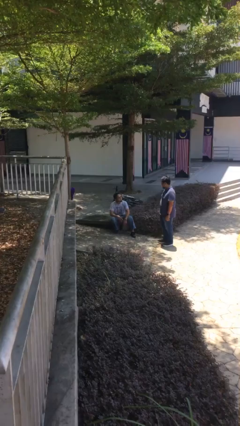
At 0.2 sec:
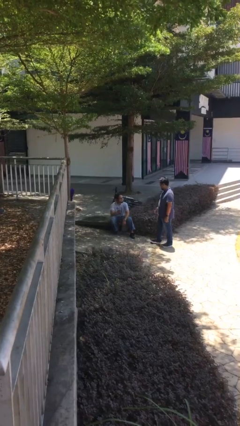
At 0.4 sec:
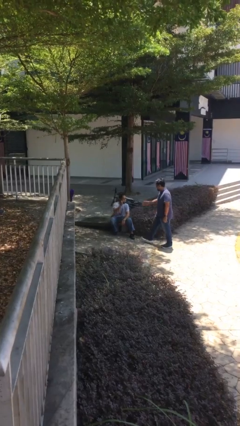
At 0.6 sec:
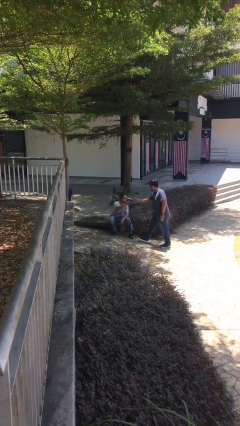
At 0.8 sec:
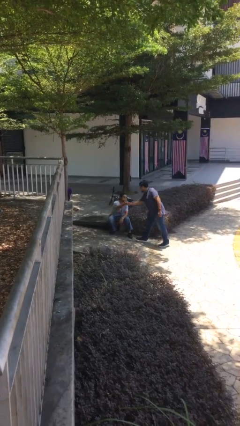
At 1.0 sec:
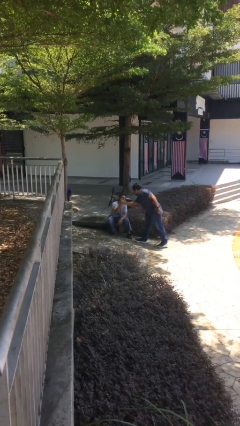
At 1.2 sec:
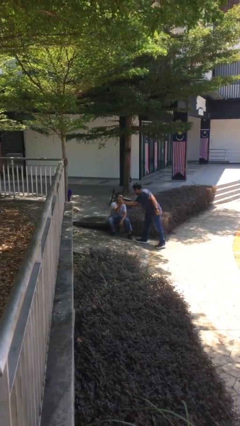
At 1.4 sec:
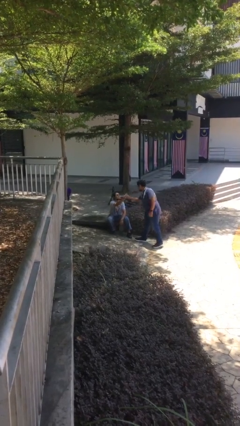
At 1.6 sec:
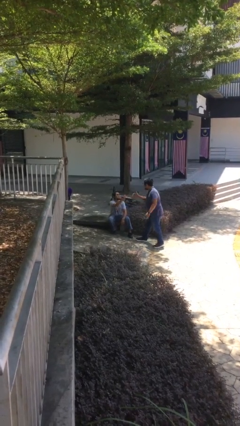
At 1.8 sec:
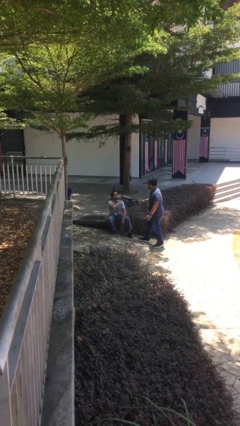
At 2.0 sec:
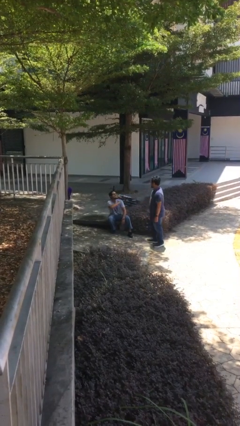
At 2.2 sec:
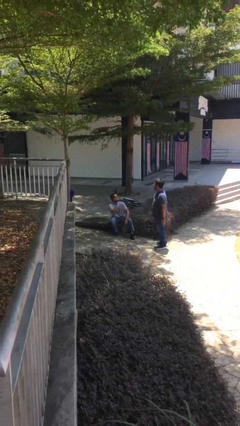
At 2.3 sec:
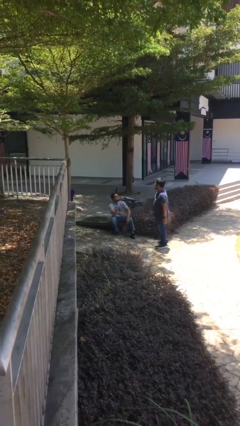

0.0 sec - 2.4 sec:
person shakes hand

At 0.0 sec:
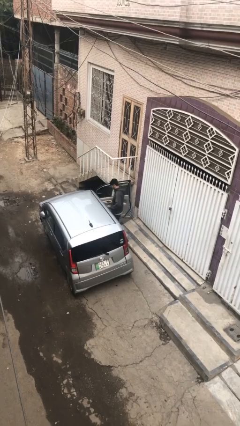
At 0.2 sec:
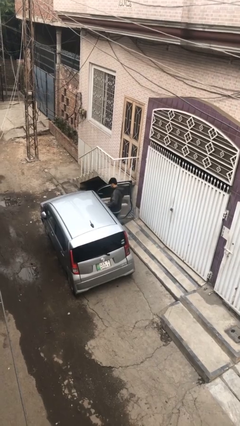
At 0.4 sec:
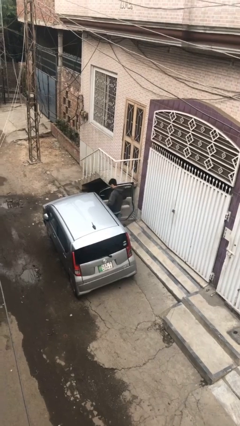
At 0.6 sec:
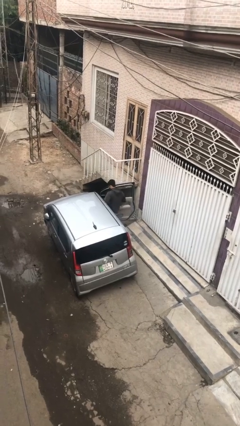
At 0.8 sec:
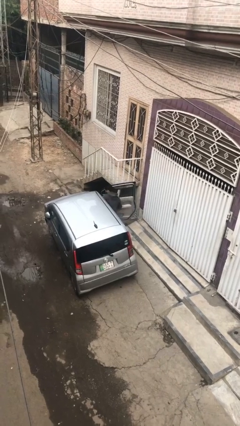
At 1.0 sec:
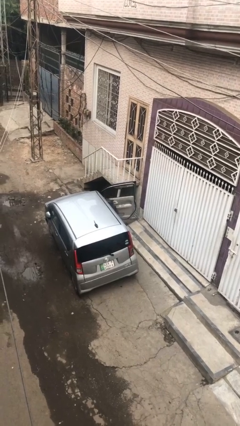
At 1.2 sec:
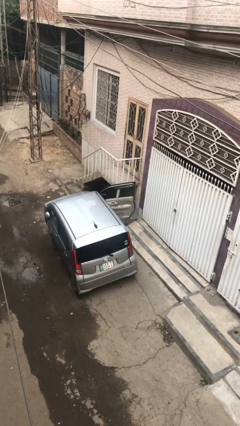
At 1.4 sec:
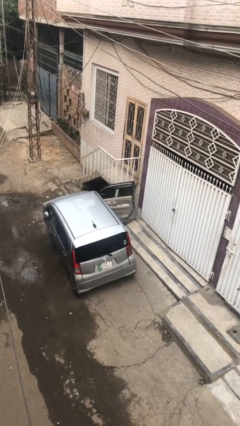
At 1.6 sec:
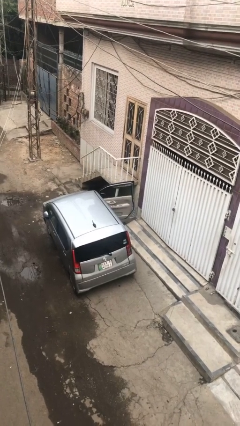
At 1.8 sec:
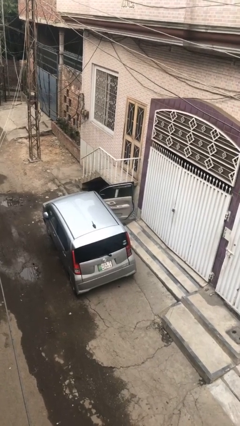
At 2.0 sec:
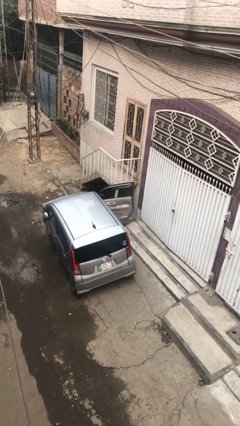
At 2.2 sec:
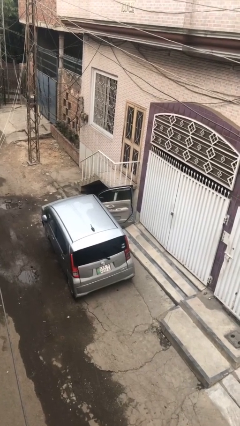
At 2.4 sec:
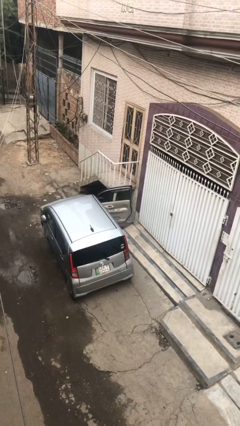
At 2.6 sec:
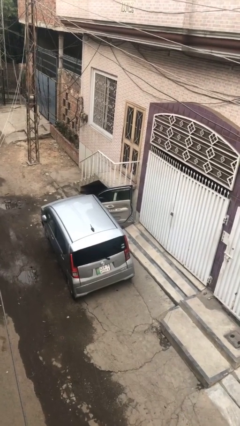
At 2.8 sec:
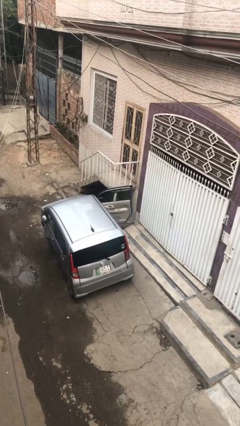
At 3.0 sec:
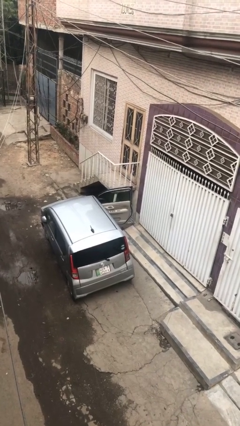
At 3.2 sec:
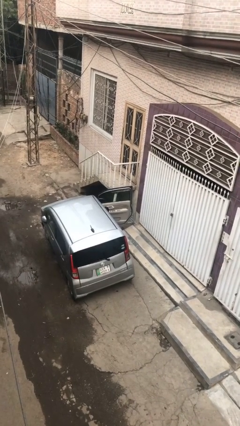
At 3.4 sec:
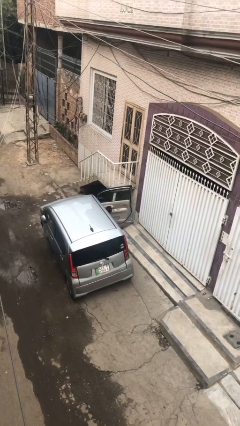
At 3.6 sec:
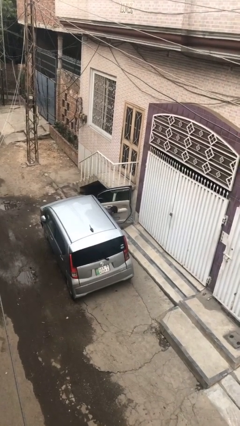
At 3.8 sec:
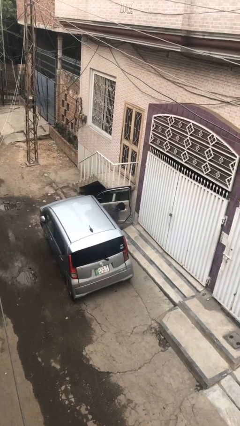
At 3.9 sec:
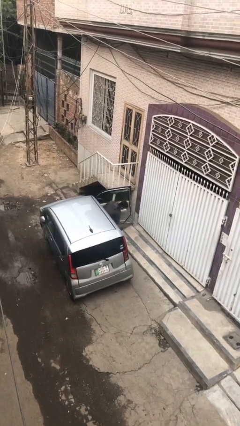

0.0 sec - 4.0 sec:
person enters car

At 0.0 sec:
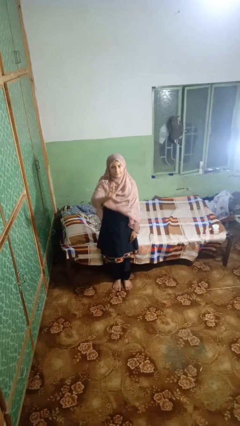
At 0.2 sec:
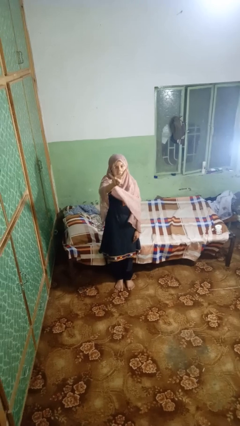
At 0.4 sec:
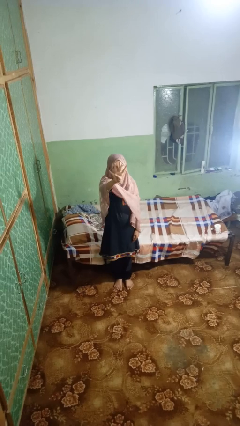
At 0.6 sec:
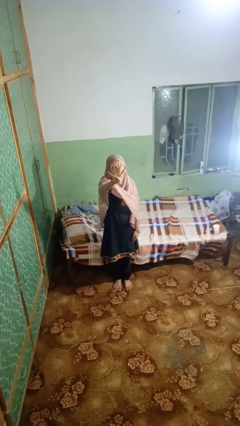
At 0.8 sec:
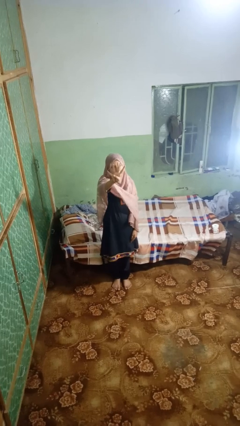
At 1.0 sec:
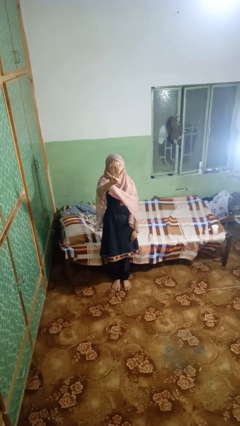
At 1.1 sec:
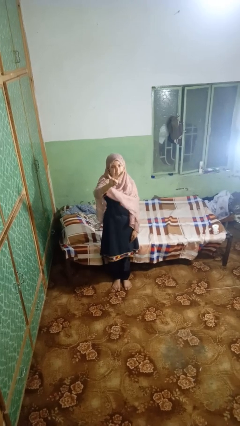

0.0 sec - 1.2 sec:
person gestures number four

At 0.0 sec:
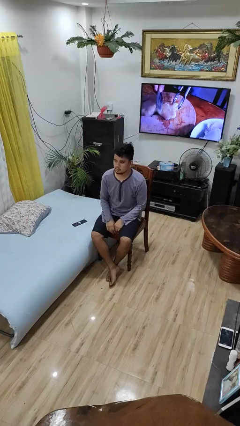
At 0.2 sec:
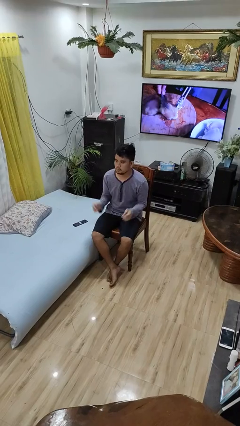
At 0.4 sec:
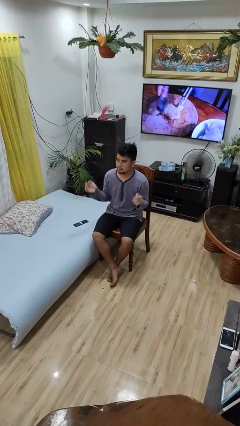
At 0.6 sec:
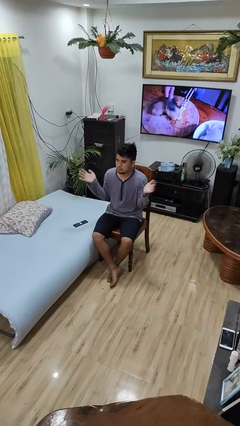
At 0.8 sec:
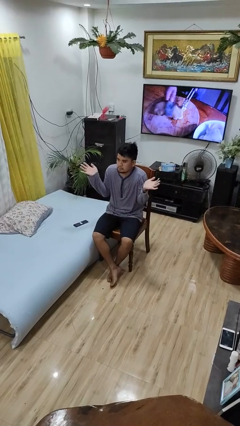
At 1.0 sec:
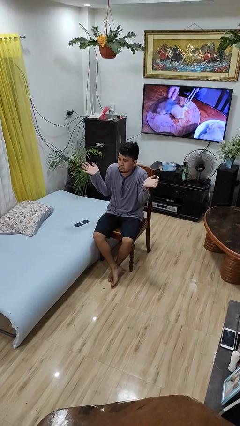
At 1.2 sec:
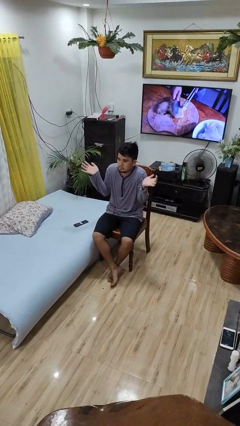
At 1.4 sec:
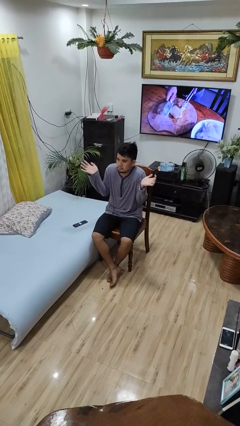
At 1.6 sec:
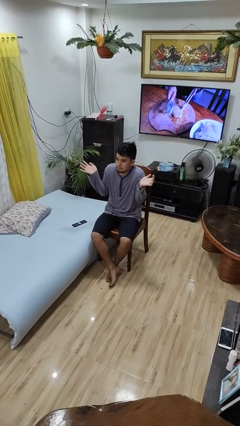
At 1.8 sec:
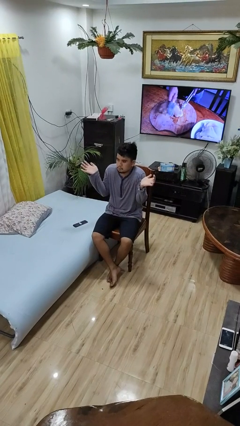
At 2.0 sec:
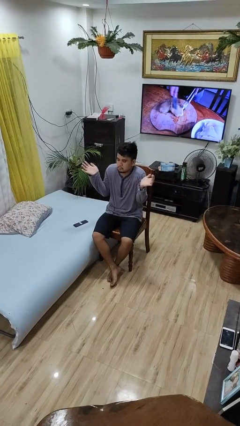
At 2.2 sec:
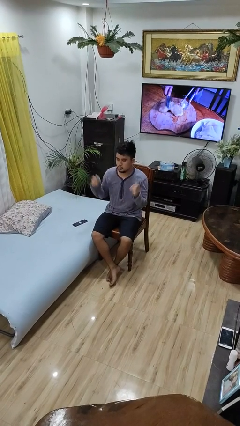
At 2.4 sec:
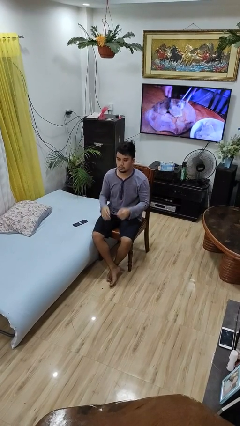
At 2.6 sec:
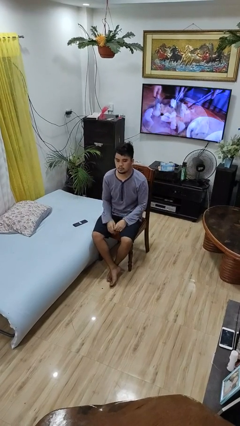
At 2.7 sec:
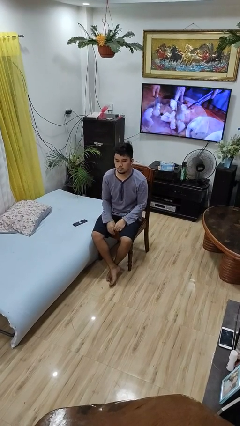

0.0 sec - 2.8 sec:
person shrugs

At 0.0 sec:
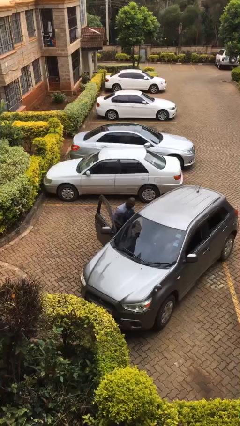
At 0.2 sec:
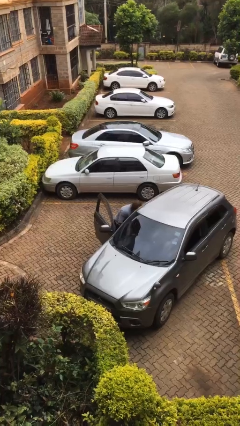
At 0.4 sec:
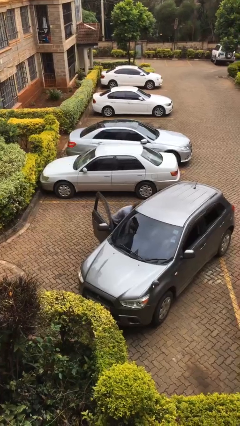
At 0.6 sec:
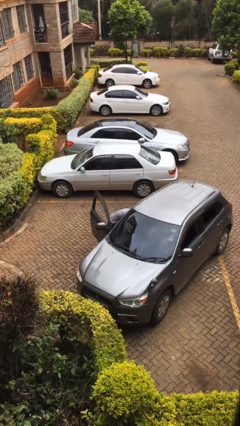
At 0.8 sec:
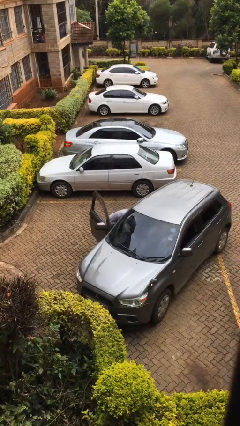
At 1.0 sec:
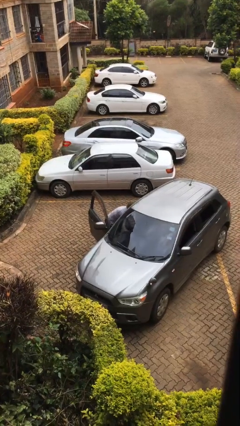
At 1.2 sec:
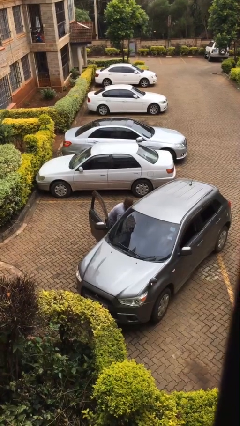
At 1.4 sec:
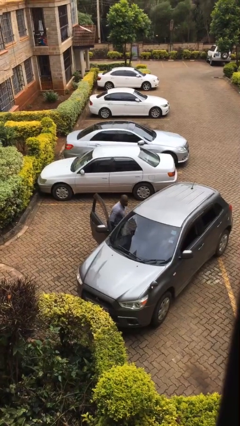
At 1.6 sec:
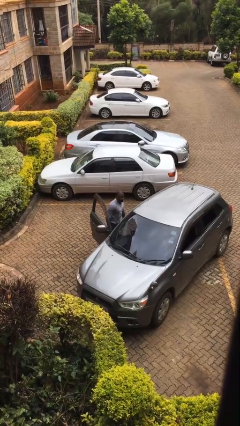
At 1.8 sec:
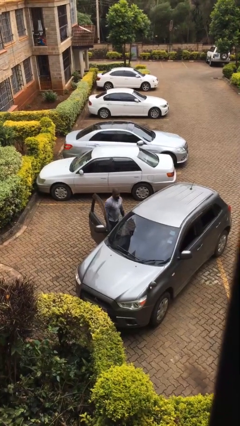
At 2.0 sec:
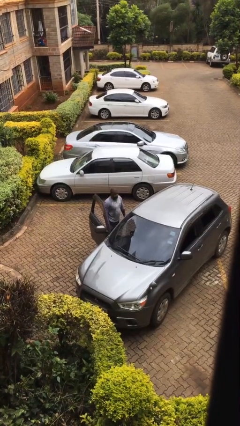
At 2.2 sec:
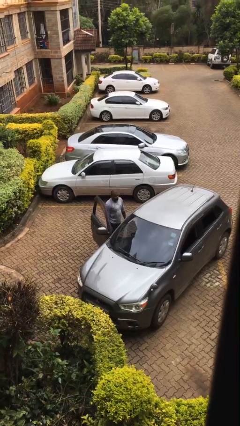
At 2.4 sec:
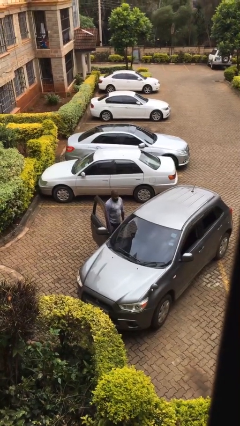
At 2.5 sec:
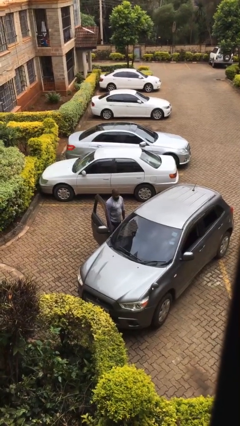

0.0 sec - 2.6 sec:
person loads car

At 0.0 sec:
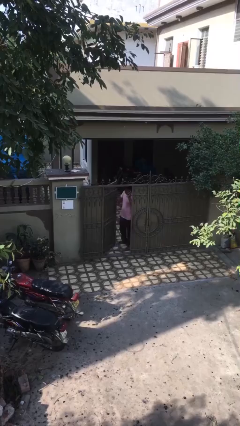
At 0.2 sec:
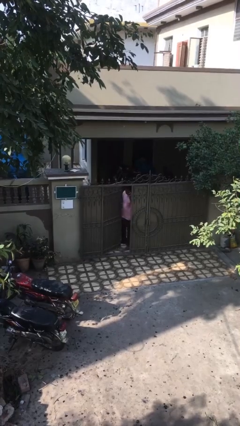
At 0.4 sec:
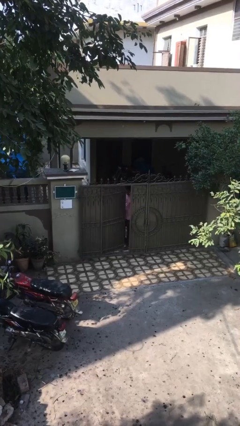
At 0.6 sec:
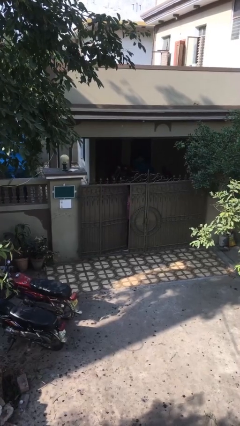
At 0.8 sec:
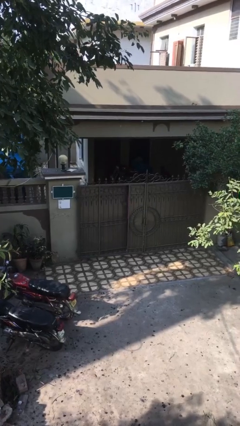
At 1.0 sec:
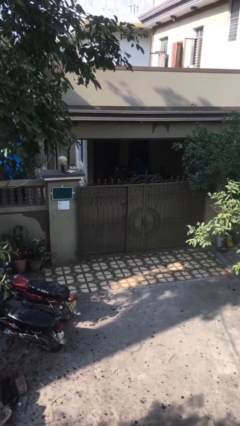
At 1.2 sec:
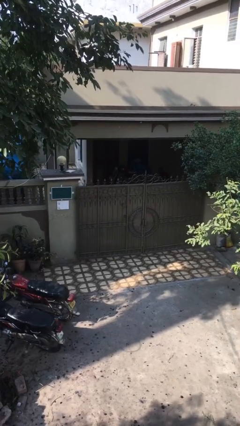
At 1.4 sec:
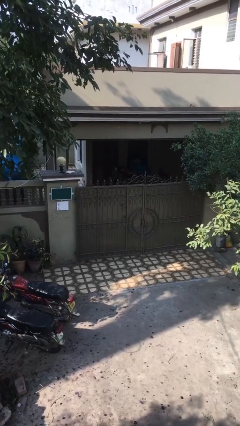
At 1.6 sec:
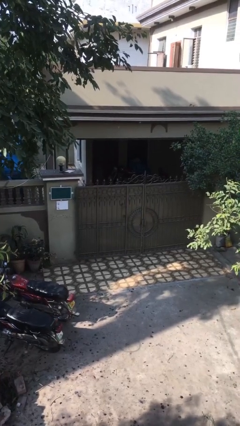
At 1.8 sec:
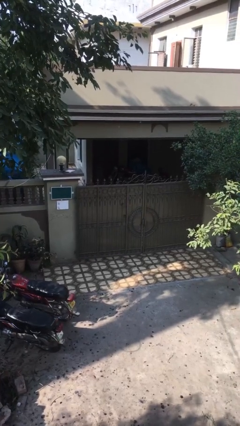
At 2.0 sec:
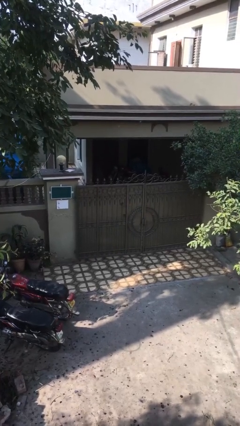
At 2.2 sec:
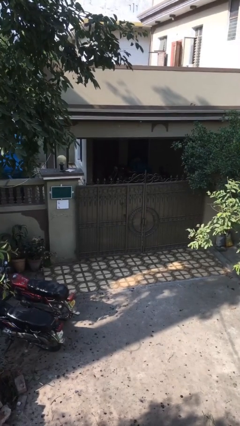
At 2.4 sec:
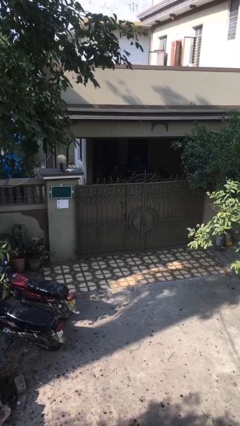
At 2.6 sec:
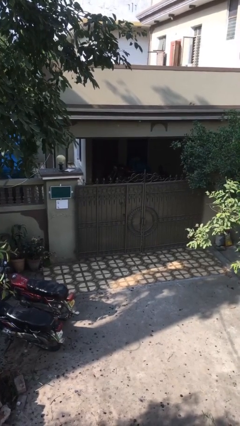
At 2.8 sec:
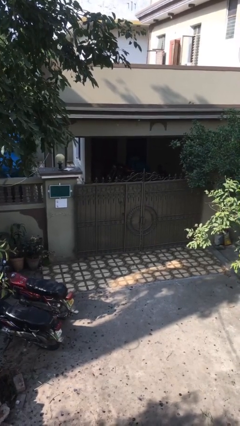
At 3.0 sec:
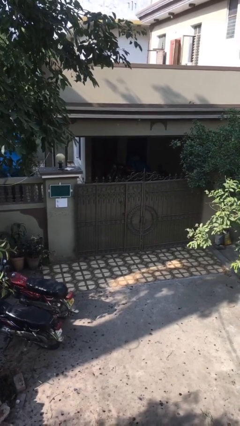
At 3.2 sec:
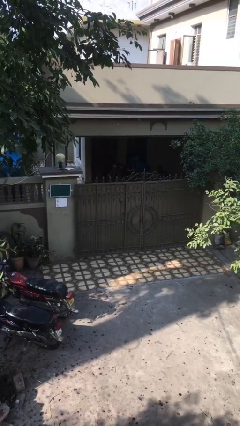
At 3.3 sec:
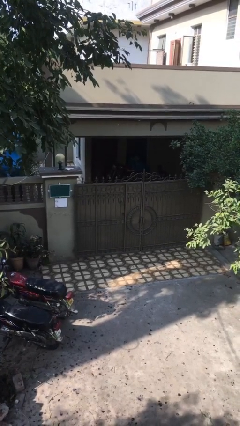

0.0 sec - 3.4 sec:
person closes facility door

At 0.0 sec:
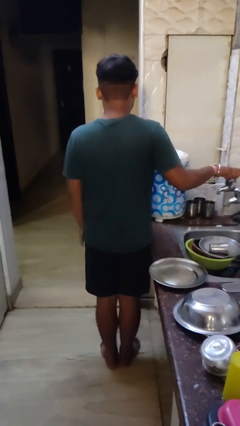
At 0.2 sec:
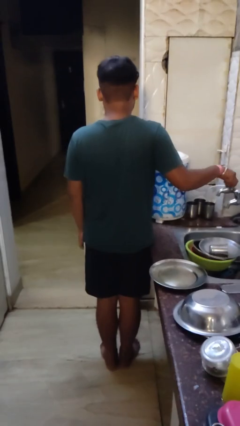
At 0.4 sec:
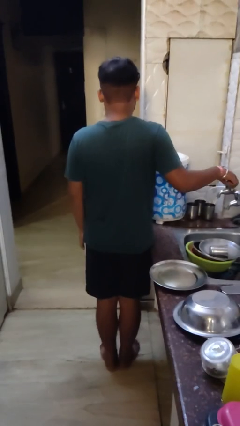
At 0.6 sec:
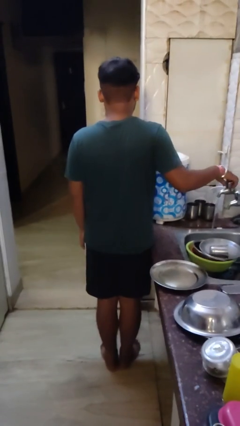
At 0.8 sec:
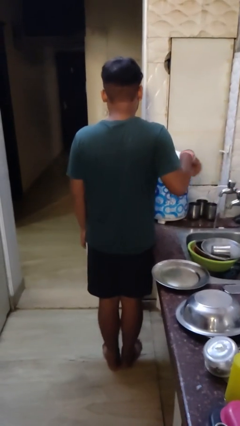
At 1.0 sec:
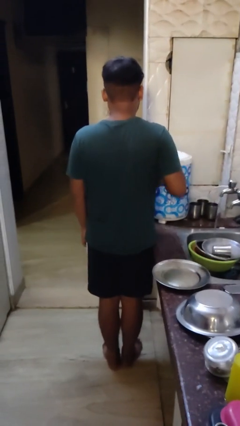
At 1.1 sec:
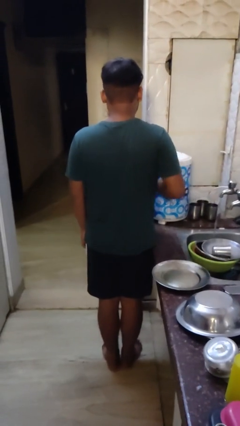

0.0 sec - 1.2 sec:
person turns on faucet
